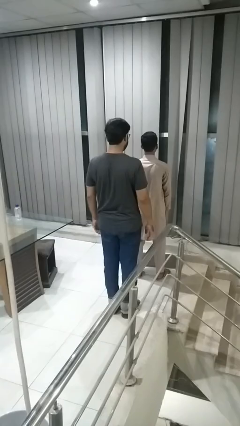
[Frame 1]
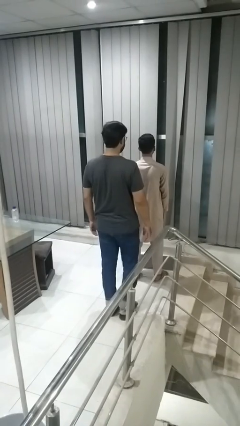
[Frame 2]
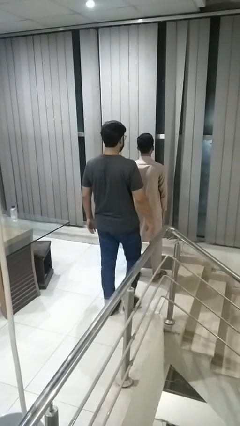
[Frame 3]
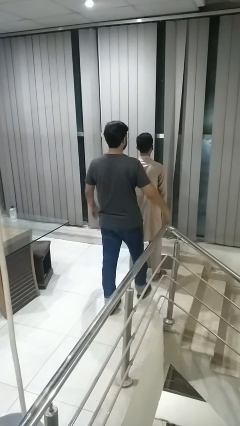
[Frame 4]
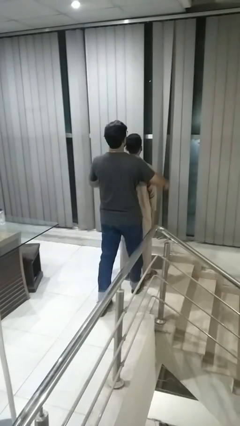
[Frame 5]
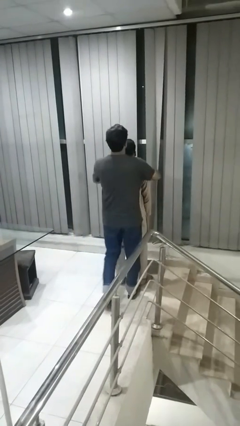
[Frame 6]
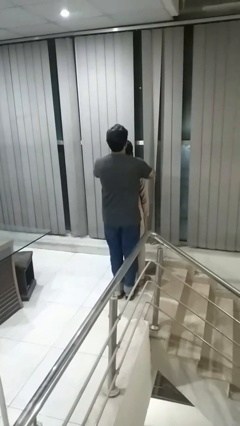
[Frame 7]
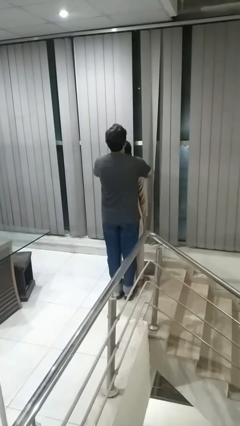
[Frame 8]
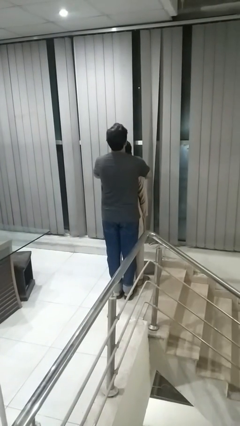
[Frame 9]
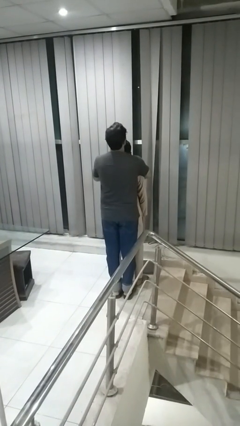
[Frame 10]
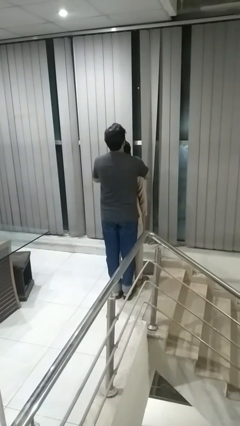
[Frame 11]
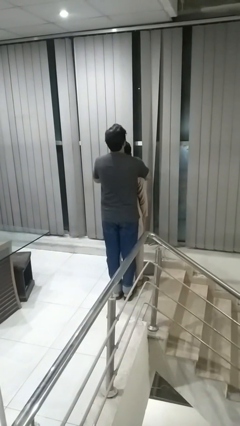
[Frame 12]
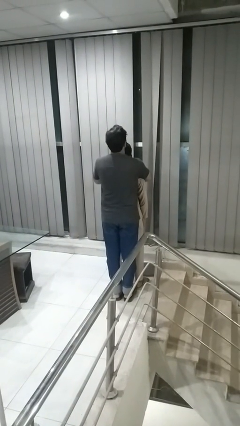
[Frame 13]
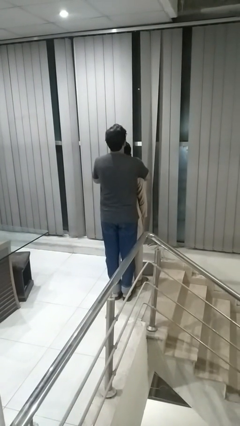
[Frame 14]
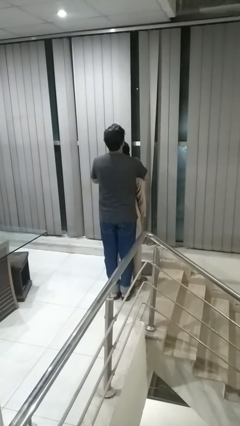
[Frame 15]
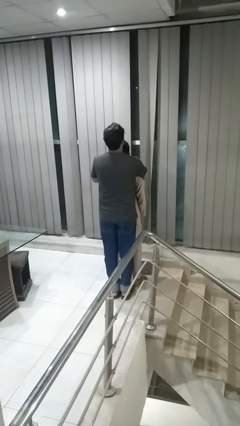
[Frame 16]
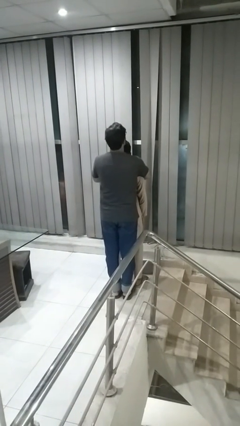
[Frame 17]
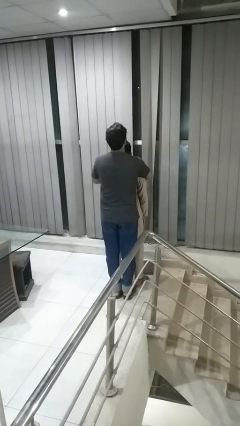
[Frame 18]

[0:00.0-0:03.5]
person hugs person from behind

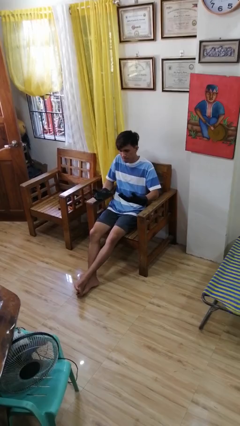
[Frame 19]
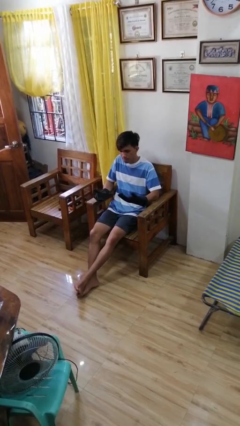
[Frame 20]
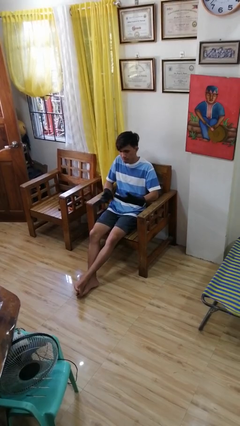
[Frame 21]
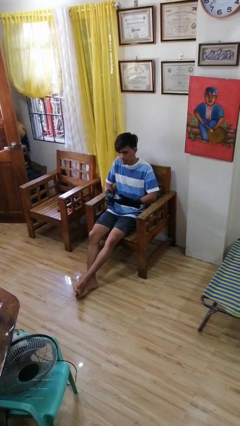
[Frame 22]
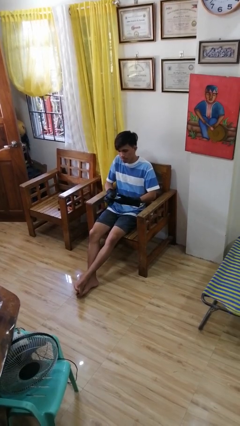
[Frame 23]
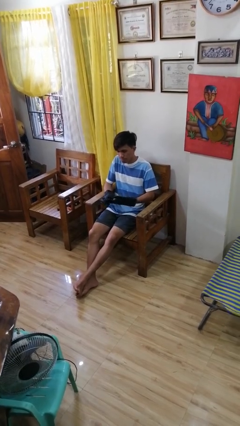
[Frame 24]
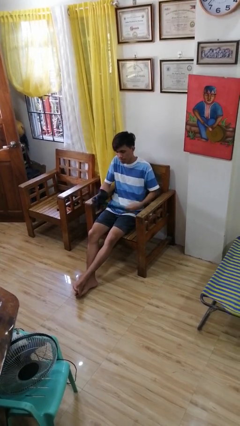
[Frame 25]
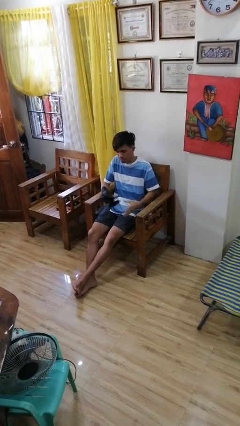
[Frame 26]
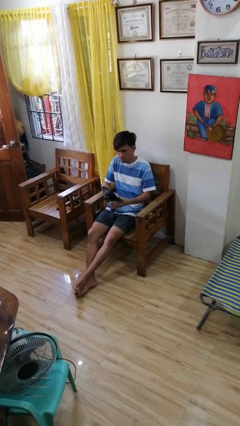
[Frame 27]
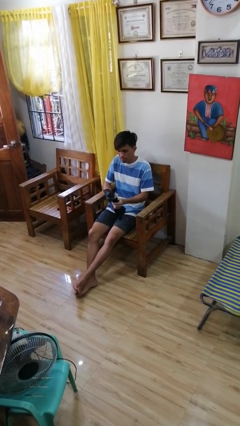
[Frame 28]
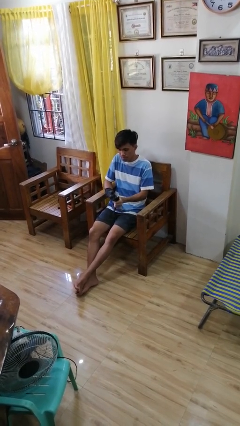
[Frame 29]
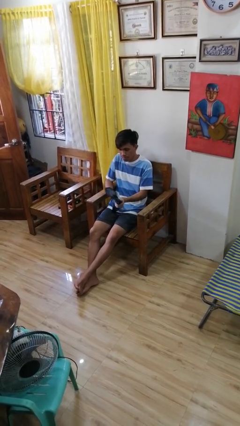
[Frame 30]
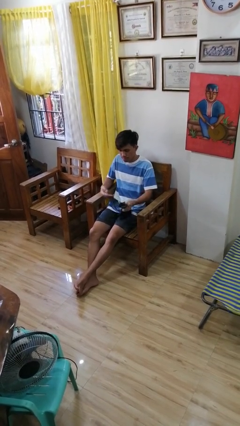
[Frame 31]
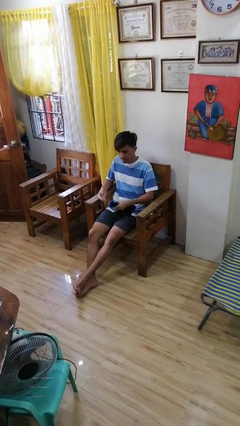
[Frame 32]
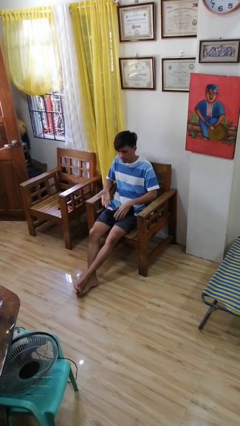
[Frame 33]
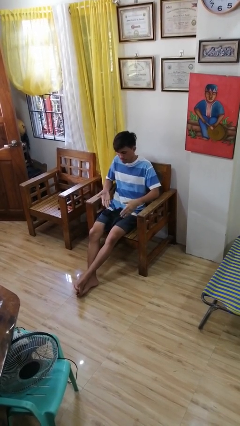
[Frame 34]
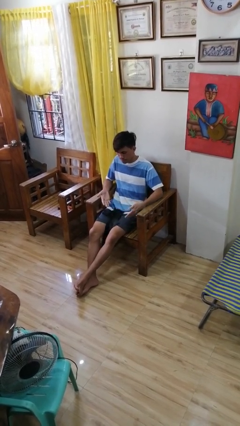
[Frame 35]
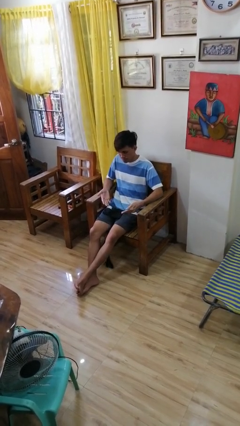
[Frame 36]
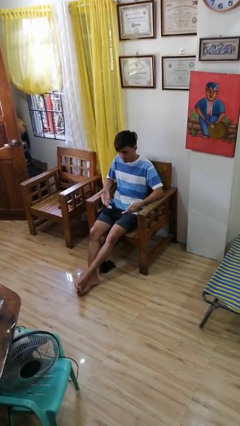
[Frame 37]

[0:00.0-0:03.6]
person takes off gloves

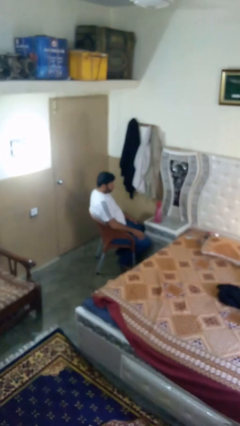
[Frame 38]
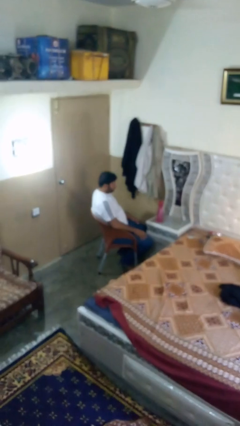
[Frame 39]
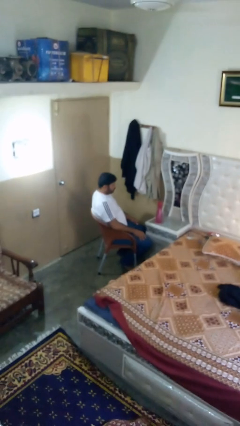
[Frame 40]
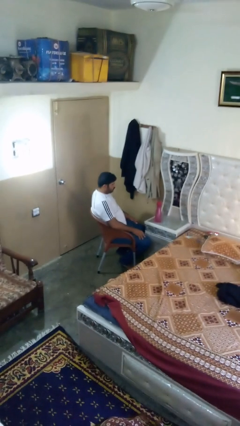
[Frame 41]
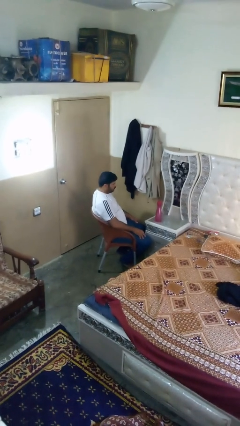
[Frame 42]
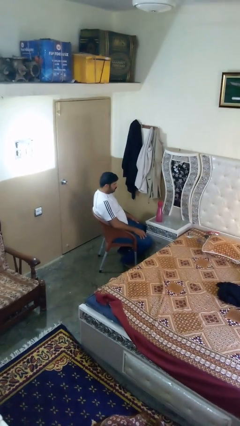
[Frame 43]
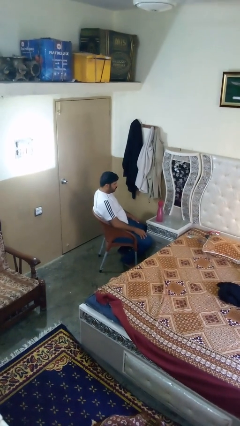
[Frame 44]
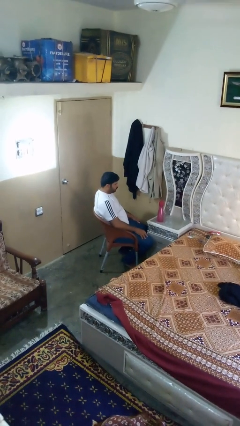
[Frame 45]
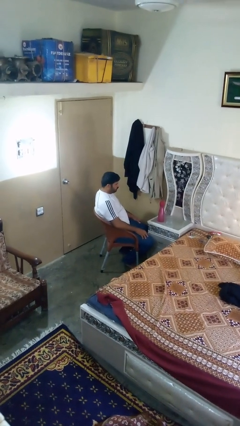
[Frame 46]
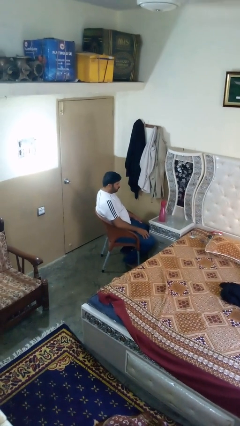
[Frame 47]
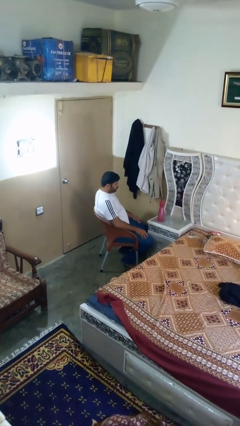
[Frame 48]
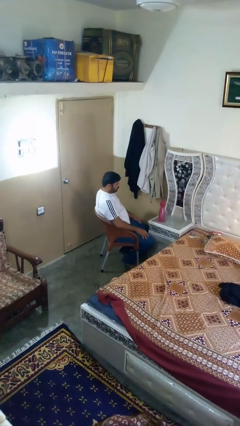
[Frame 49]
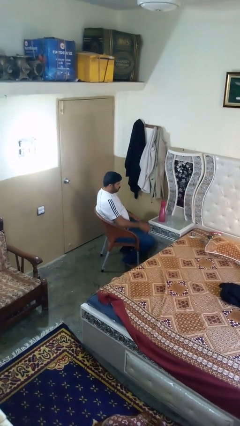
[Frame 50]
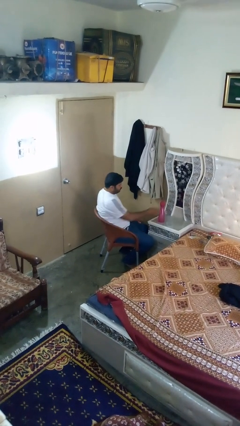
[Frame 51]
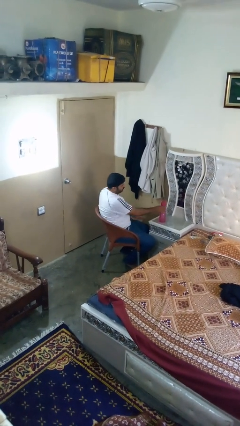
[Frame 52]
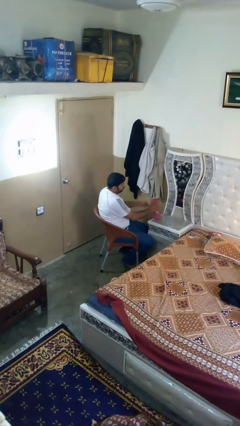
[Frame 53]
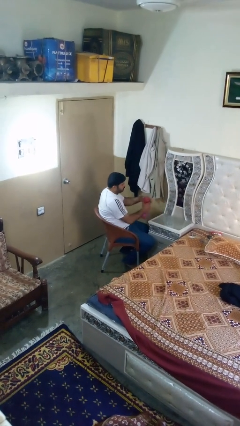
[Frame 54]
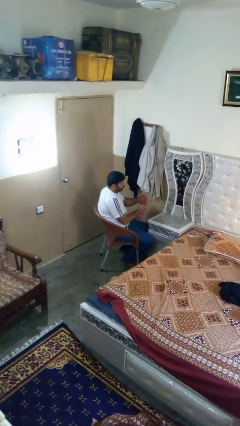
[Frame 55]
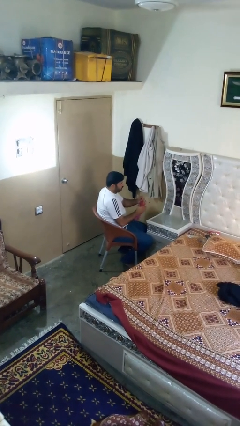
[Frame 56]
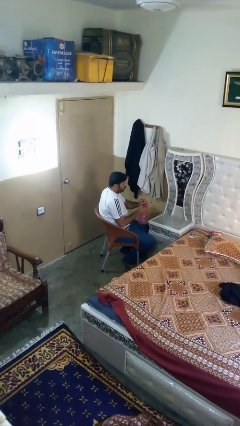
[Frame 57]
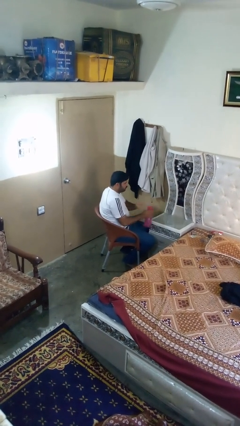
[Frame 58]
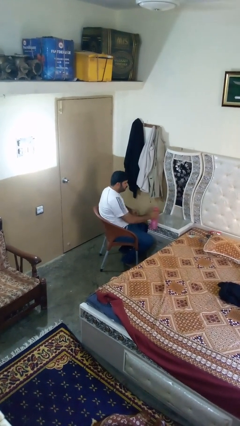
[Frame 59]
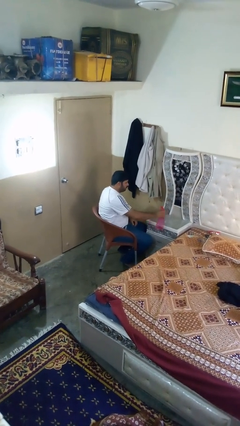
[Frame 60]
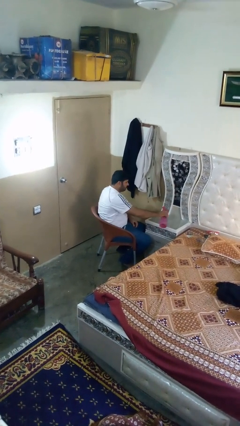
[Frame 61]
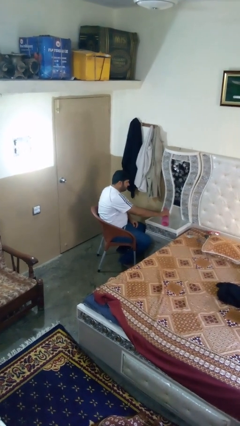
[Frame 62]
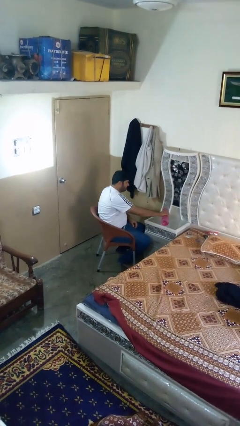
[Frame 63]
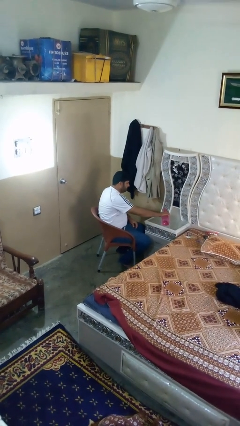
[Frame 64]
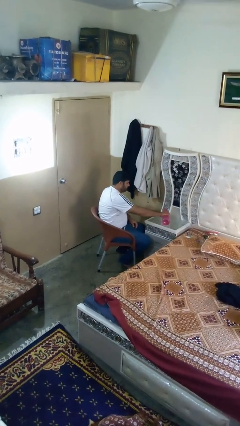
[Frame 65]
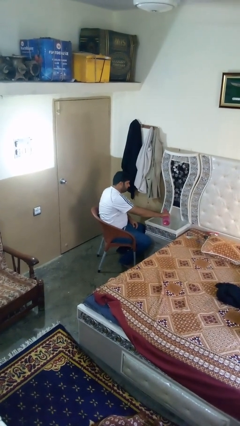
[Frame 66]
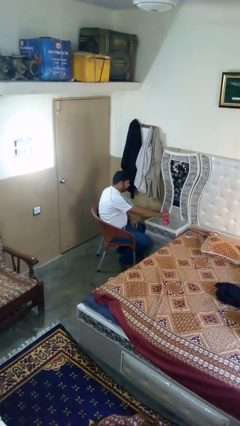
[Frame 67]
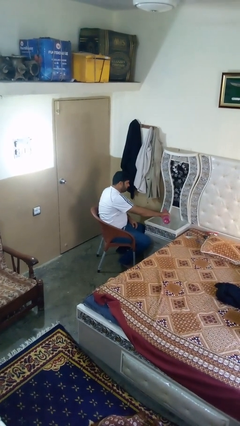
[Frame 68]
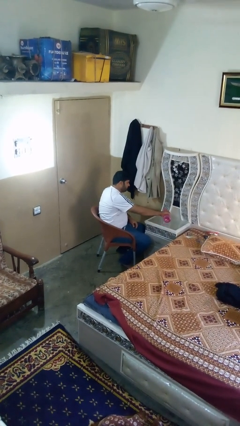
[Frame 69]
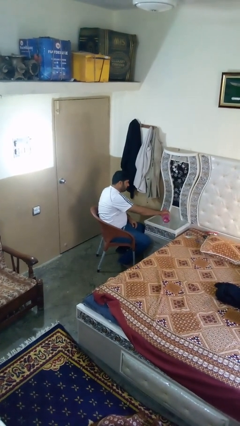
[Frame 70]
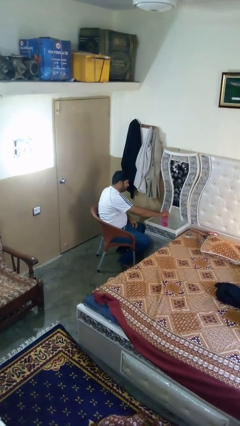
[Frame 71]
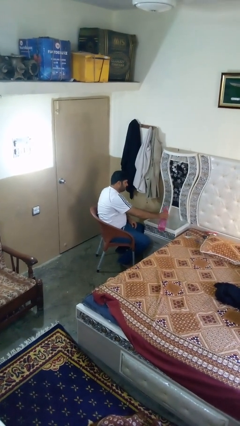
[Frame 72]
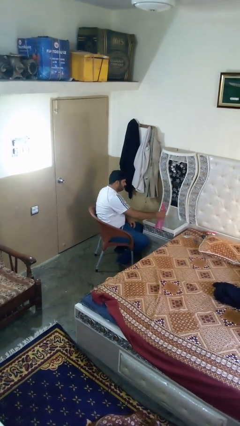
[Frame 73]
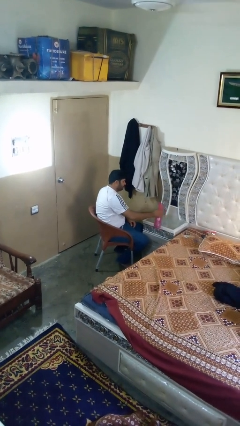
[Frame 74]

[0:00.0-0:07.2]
person pours liquid into cup

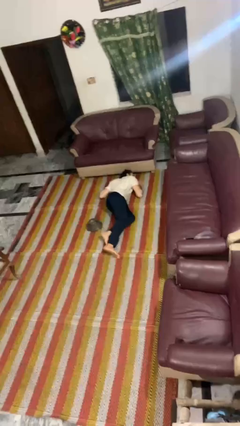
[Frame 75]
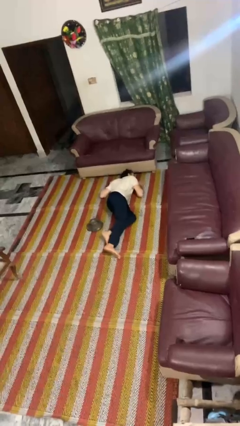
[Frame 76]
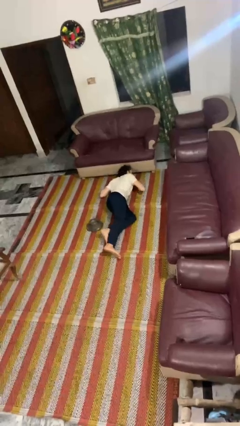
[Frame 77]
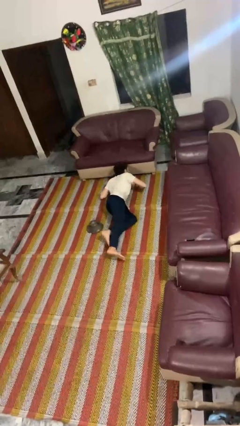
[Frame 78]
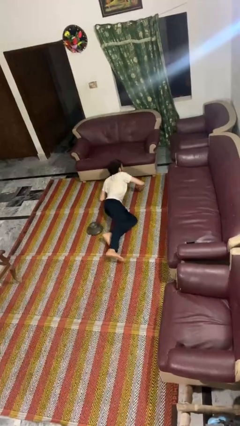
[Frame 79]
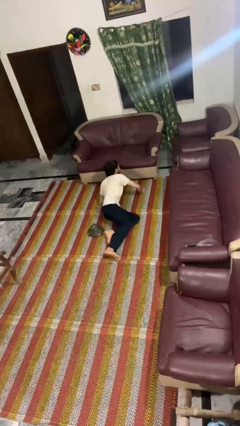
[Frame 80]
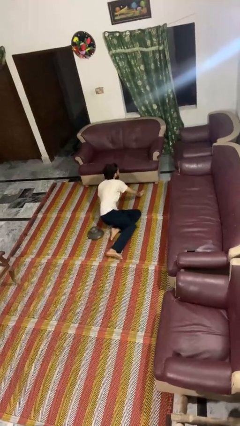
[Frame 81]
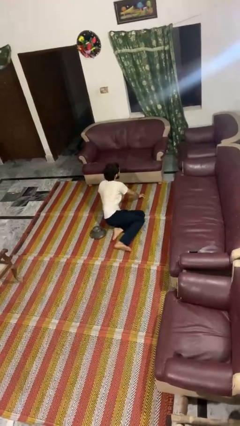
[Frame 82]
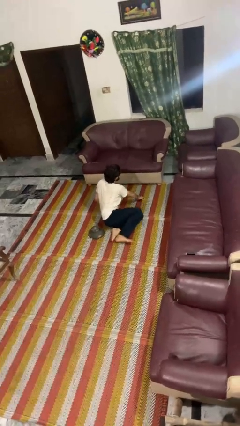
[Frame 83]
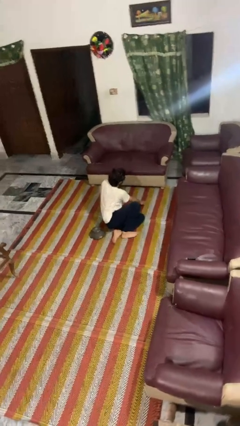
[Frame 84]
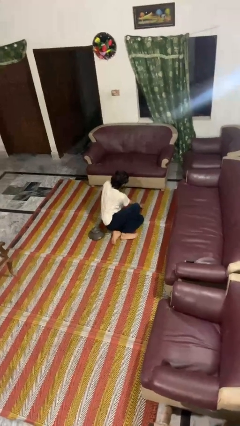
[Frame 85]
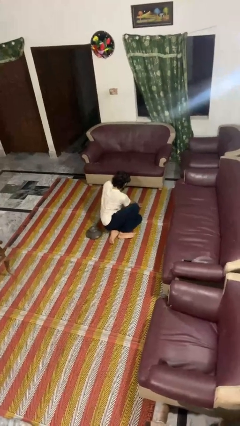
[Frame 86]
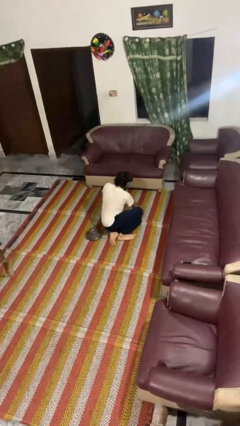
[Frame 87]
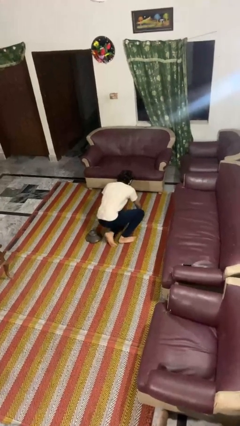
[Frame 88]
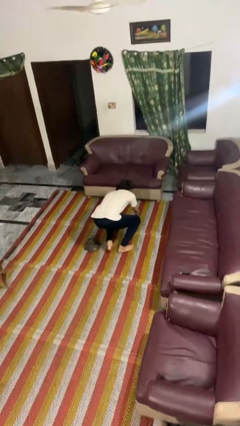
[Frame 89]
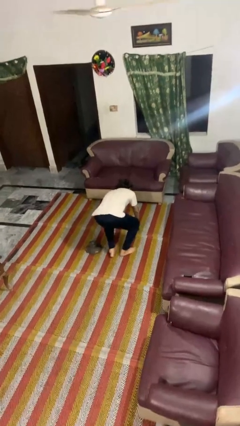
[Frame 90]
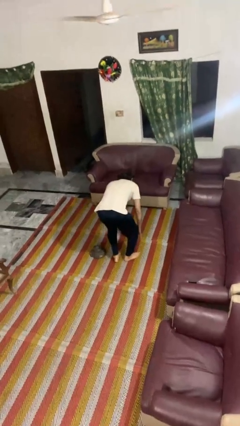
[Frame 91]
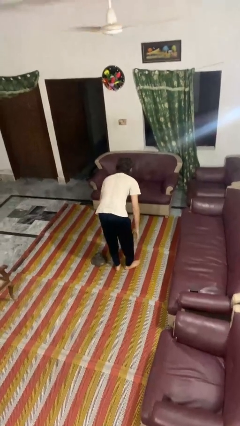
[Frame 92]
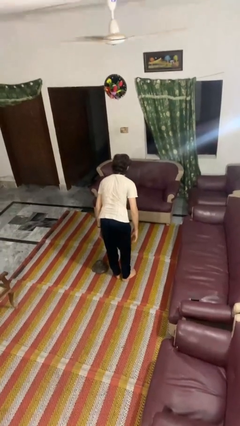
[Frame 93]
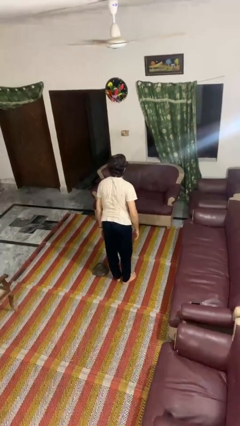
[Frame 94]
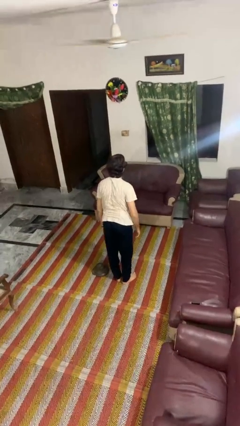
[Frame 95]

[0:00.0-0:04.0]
person stands up from floor
